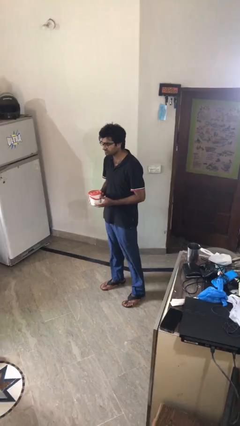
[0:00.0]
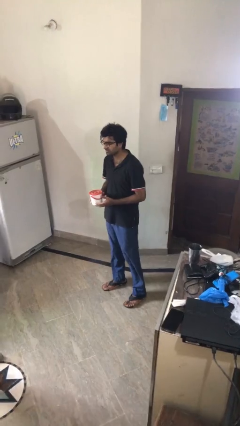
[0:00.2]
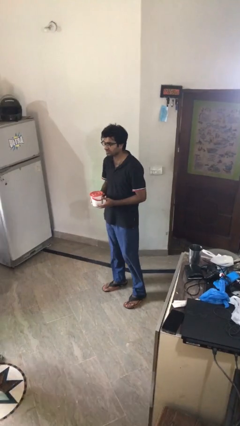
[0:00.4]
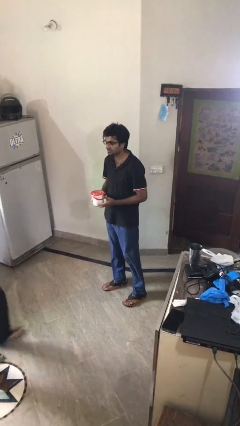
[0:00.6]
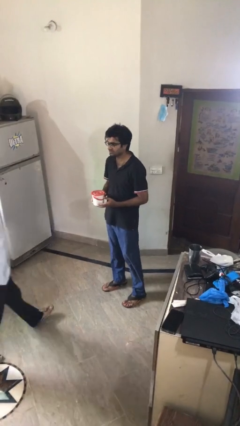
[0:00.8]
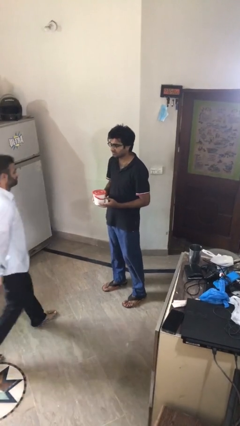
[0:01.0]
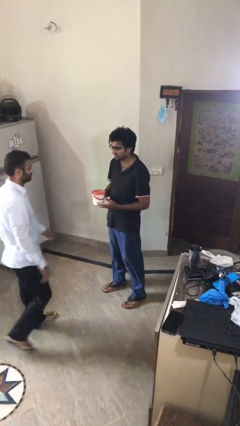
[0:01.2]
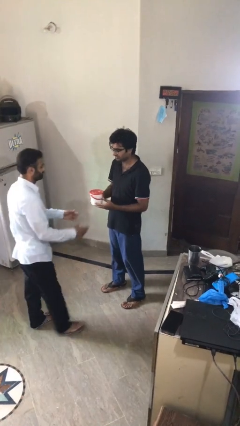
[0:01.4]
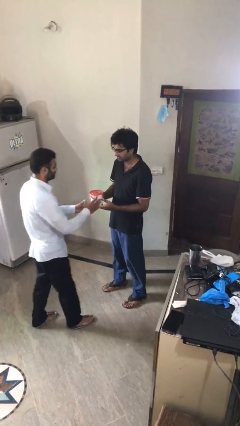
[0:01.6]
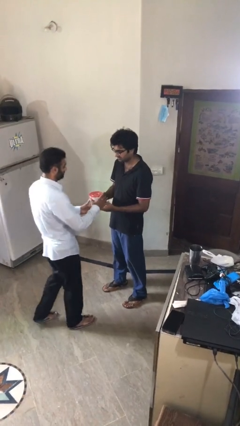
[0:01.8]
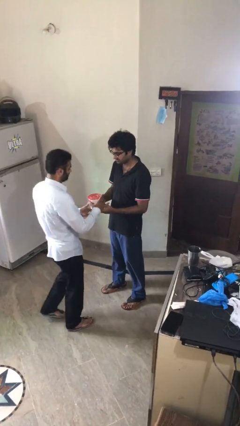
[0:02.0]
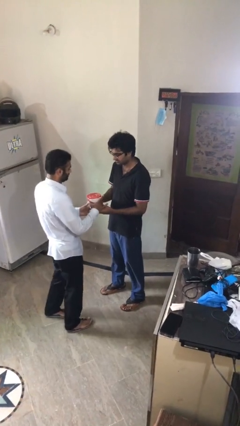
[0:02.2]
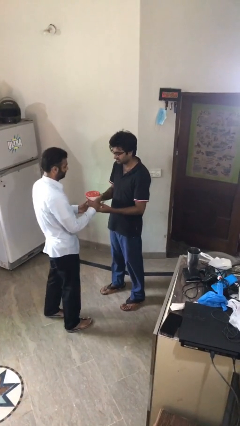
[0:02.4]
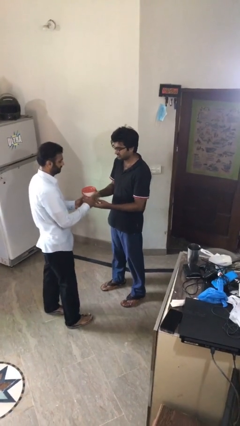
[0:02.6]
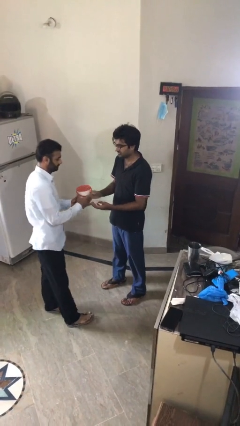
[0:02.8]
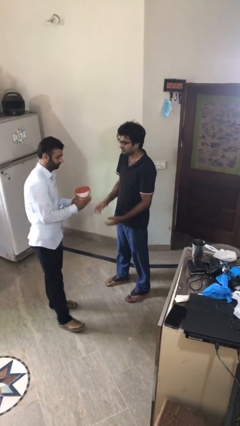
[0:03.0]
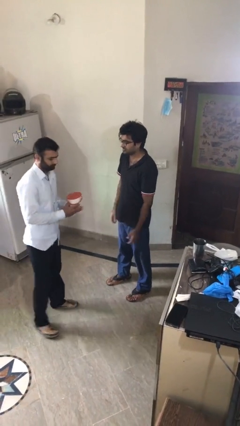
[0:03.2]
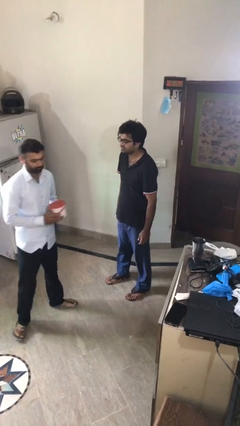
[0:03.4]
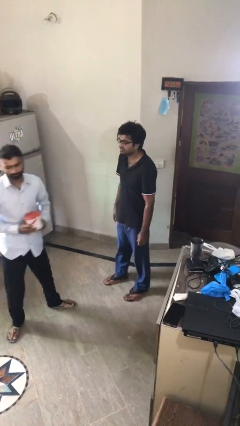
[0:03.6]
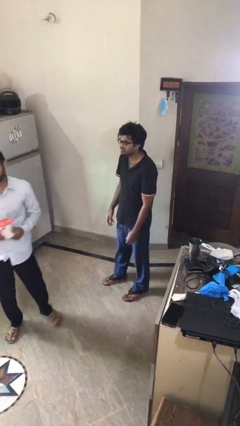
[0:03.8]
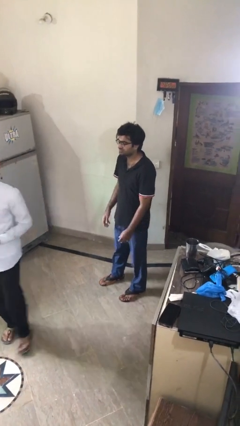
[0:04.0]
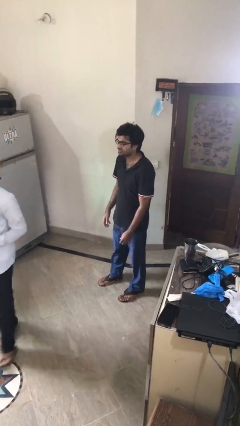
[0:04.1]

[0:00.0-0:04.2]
person transfers object to person

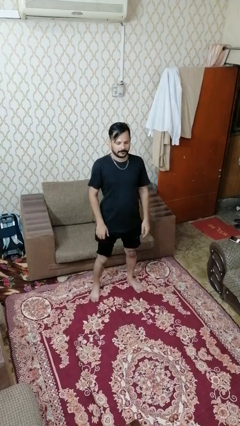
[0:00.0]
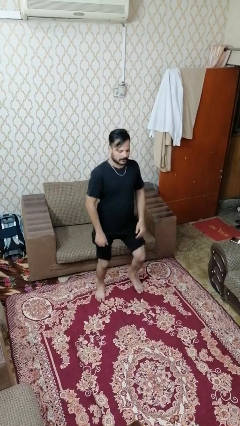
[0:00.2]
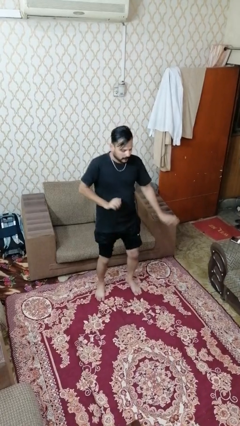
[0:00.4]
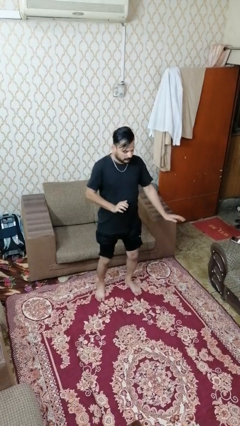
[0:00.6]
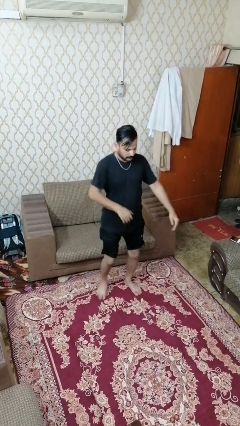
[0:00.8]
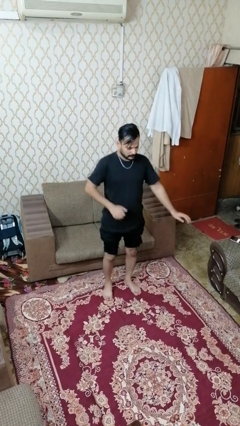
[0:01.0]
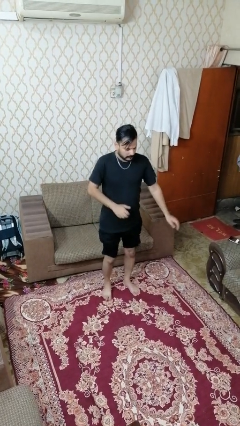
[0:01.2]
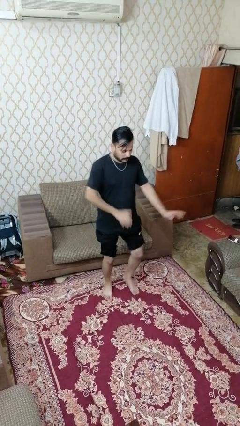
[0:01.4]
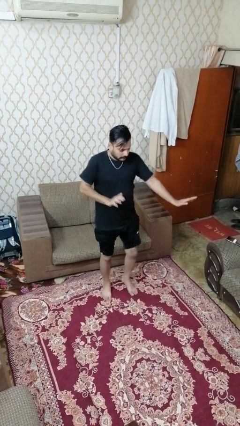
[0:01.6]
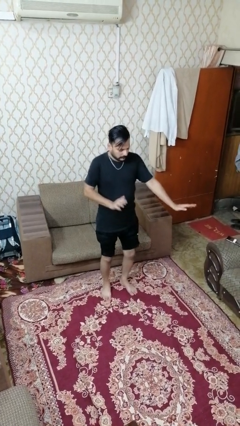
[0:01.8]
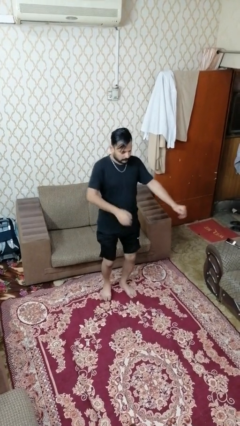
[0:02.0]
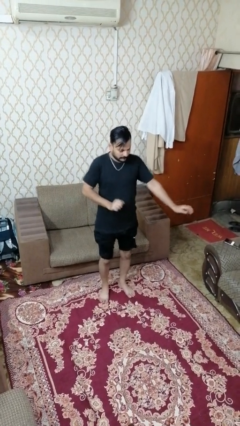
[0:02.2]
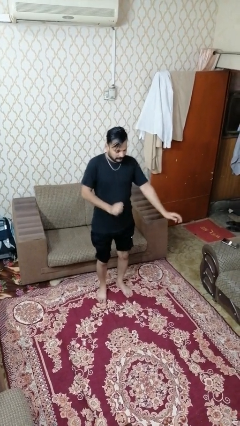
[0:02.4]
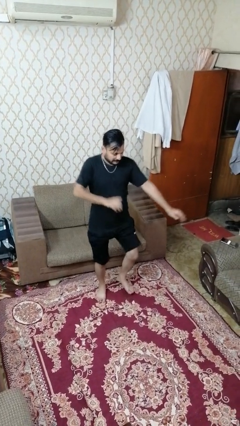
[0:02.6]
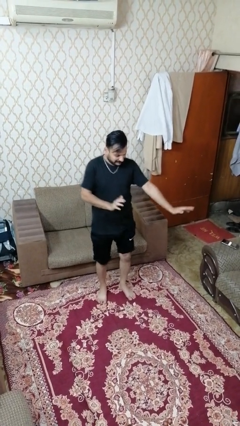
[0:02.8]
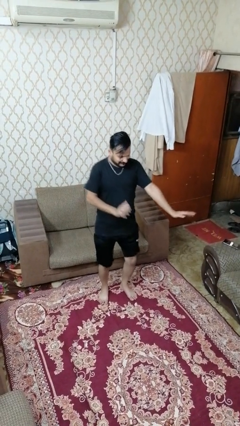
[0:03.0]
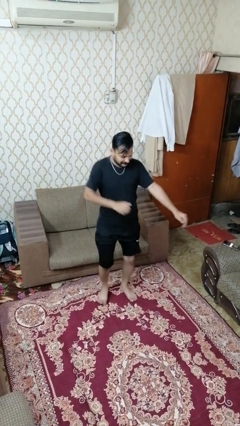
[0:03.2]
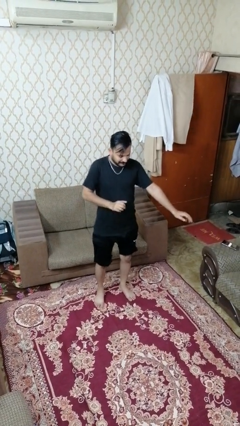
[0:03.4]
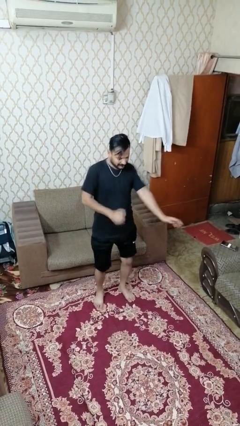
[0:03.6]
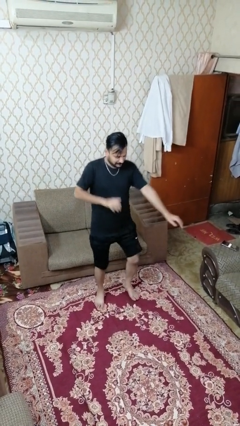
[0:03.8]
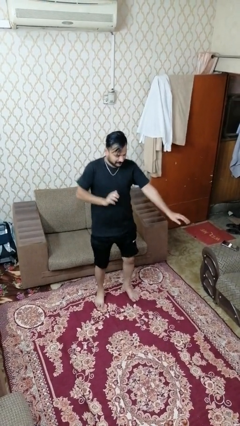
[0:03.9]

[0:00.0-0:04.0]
person dances in place

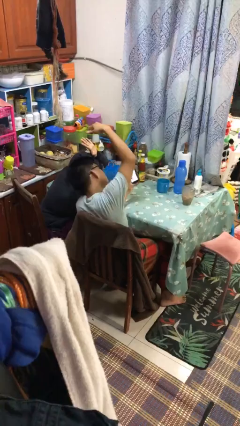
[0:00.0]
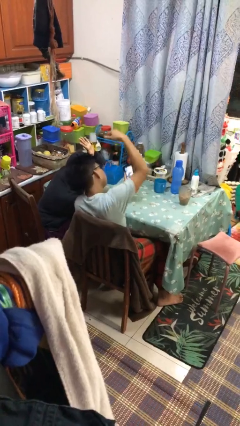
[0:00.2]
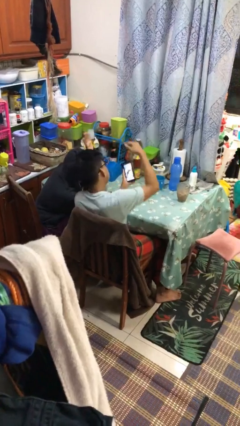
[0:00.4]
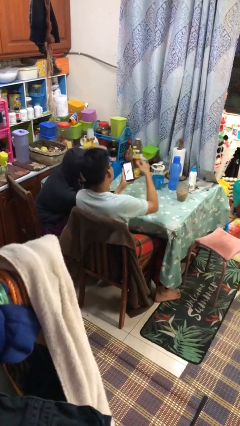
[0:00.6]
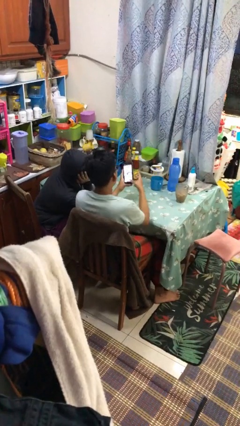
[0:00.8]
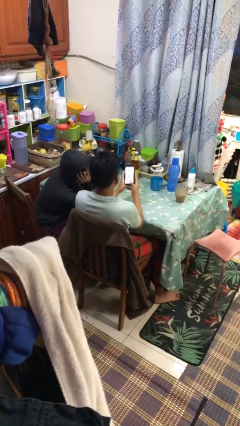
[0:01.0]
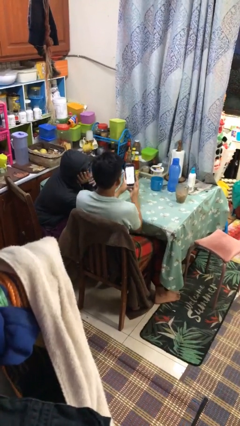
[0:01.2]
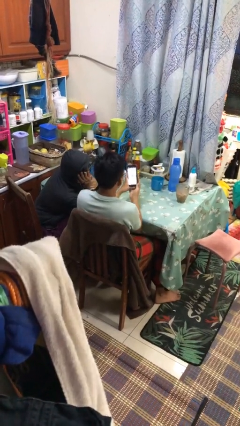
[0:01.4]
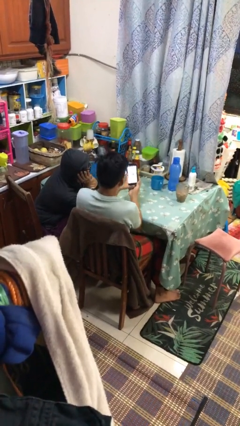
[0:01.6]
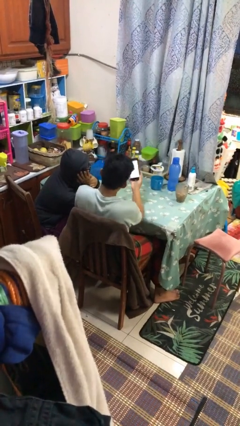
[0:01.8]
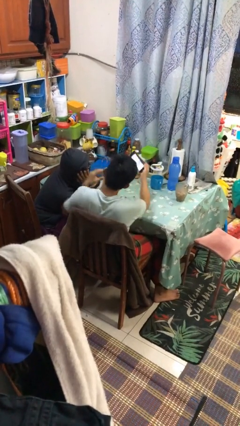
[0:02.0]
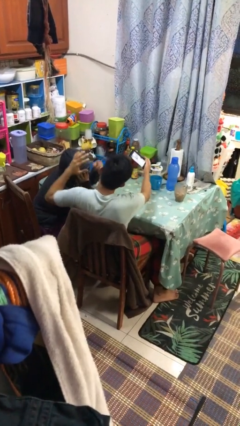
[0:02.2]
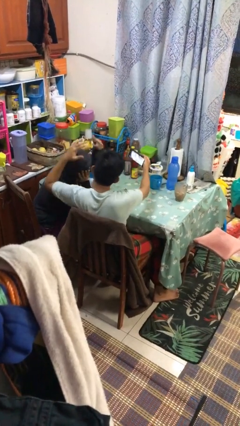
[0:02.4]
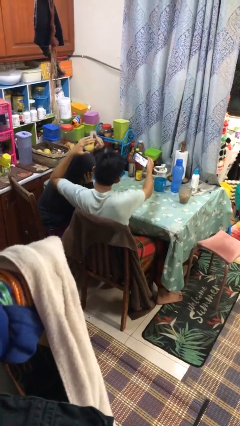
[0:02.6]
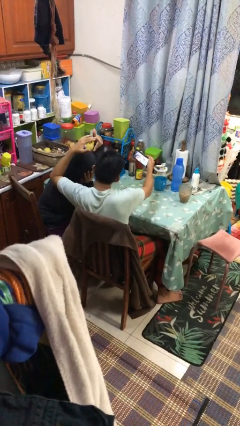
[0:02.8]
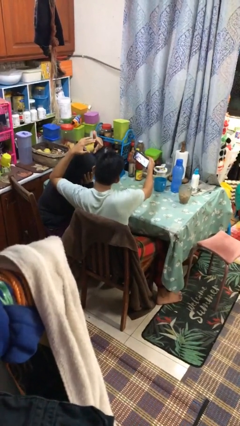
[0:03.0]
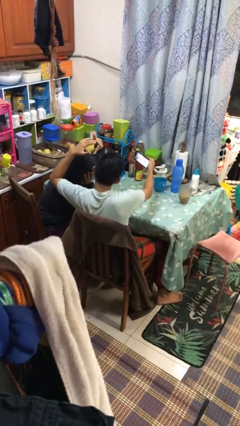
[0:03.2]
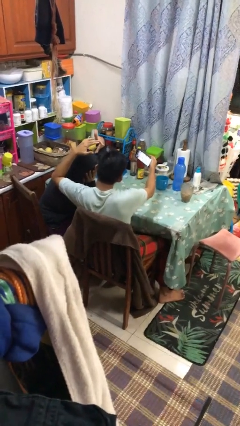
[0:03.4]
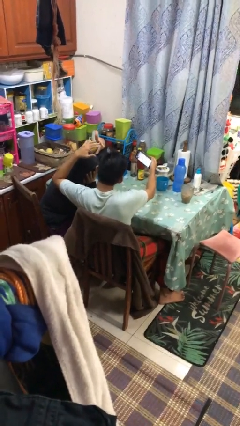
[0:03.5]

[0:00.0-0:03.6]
person takes selfie with person

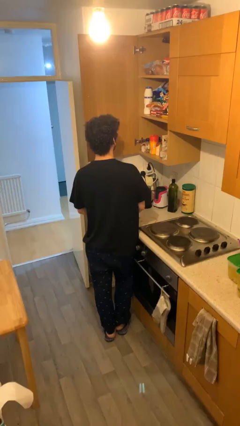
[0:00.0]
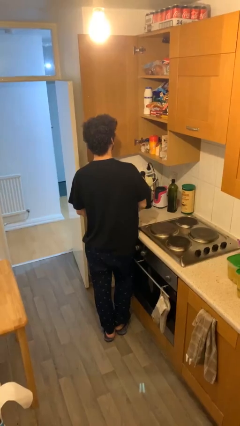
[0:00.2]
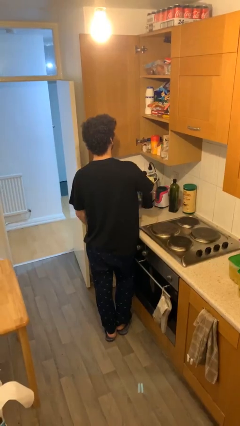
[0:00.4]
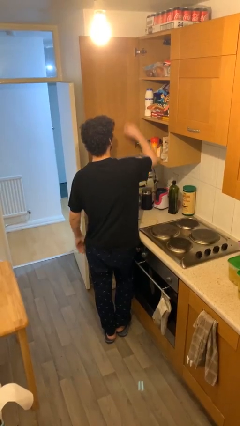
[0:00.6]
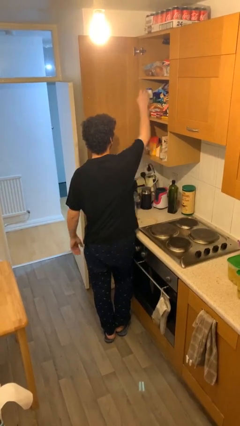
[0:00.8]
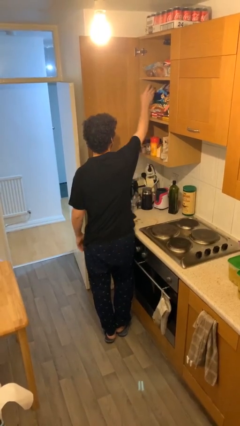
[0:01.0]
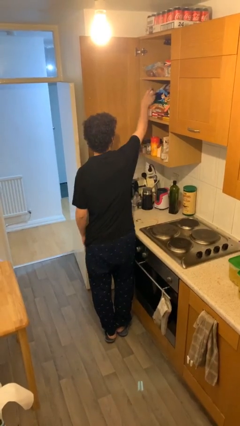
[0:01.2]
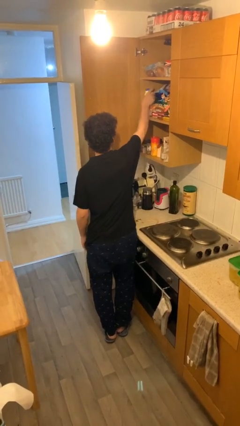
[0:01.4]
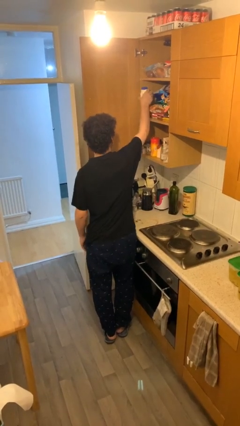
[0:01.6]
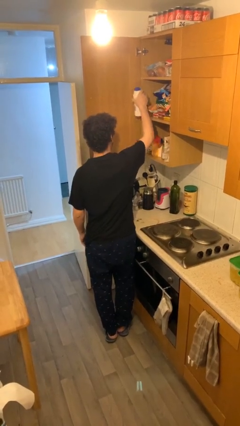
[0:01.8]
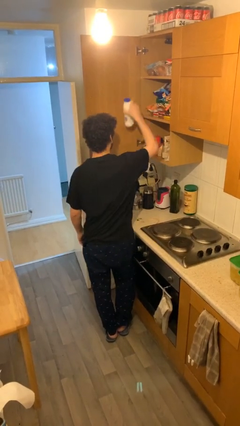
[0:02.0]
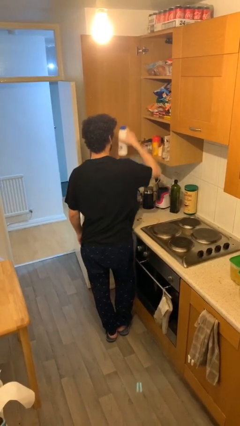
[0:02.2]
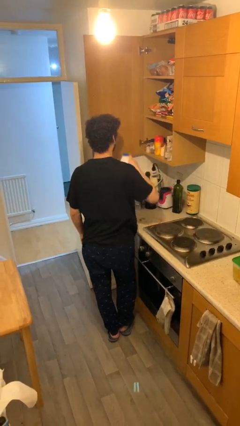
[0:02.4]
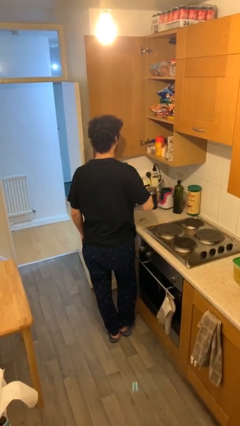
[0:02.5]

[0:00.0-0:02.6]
person picks up object from shelf

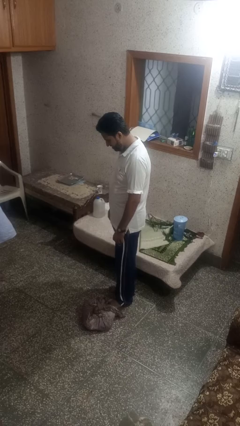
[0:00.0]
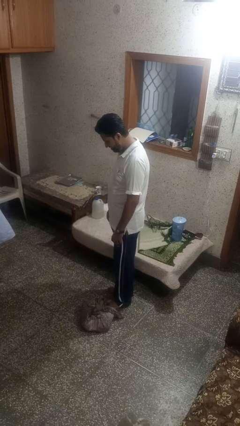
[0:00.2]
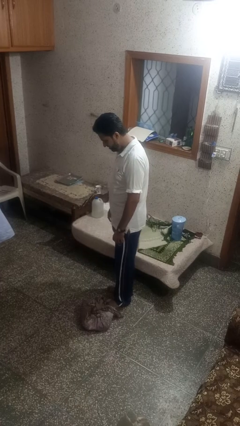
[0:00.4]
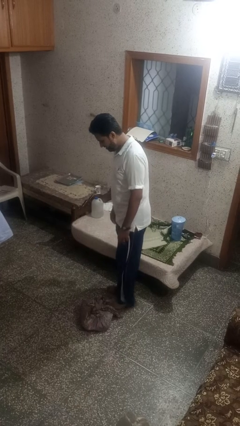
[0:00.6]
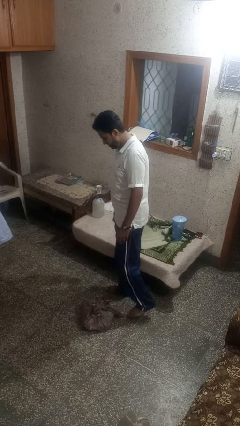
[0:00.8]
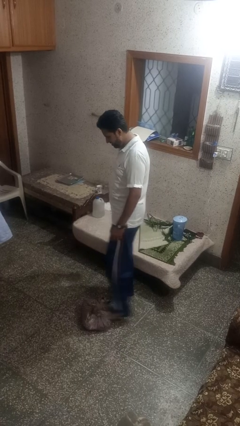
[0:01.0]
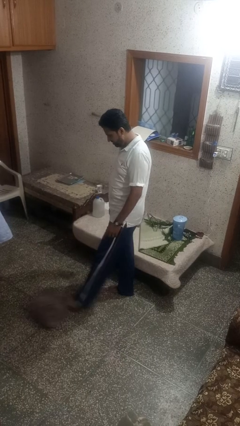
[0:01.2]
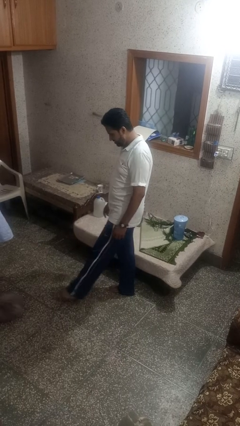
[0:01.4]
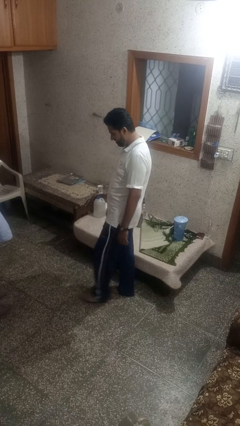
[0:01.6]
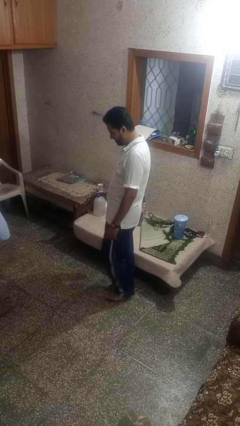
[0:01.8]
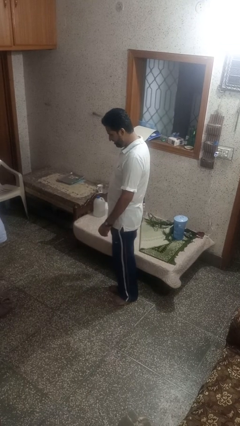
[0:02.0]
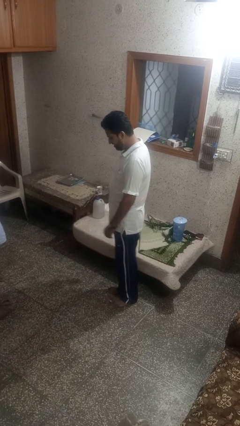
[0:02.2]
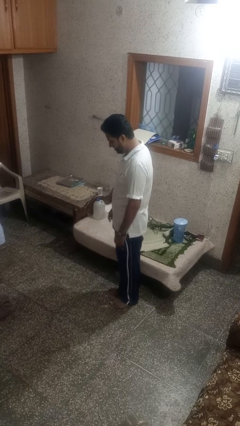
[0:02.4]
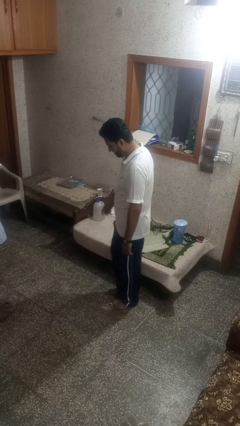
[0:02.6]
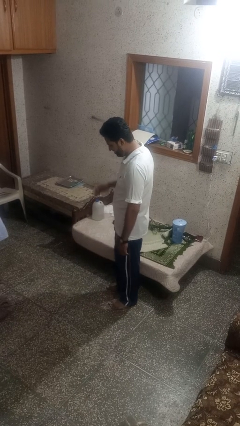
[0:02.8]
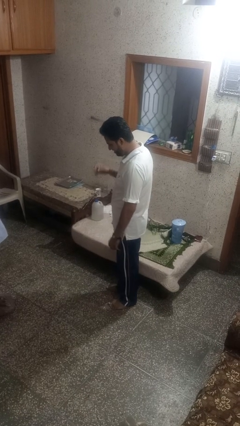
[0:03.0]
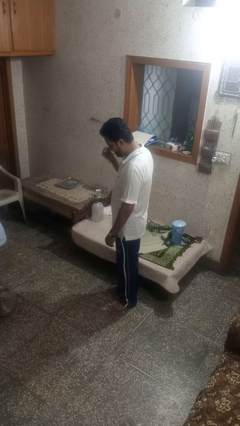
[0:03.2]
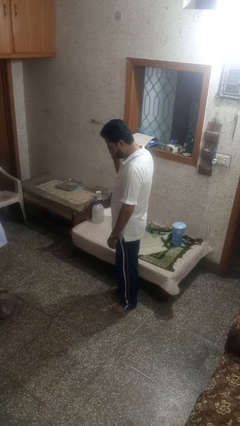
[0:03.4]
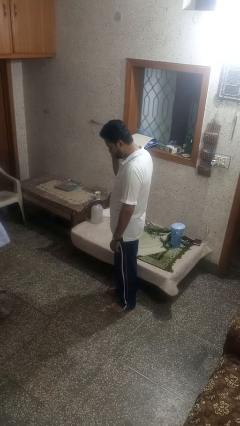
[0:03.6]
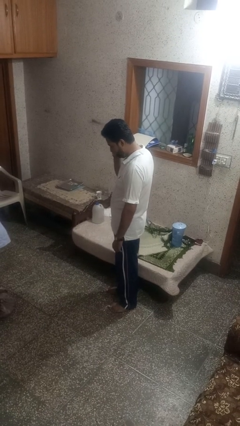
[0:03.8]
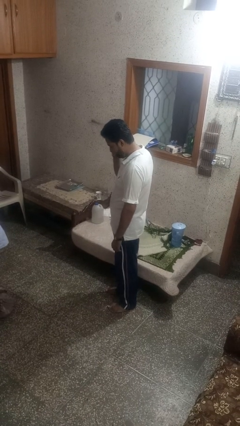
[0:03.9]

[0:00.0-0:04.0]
person kicks object to person
